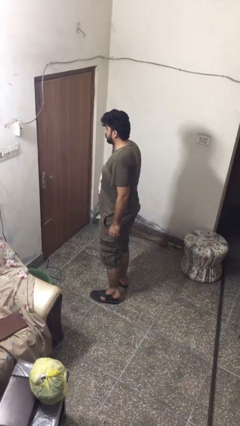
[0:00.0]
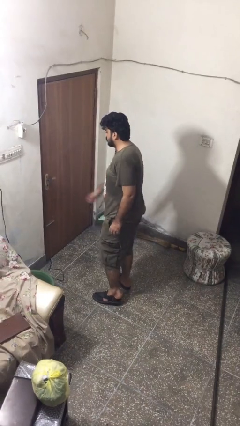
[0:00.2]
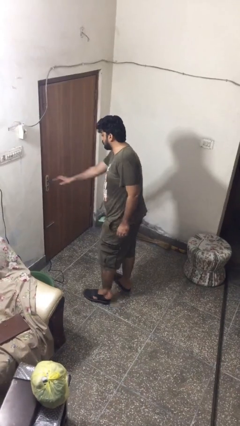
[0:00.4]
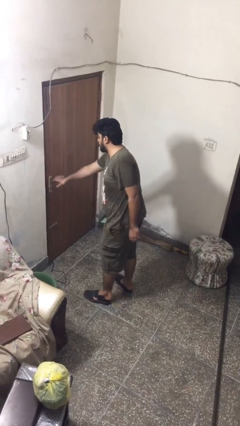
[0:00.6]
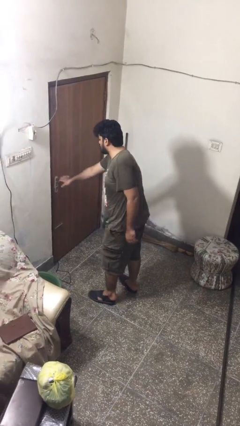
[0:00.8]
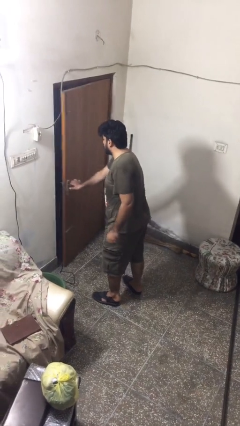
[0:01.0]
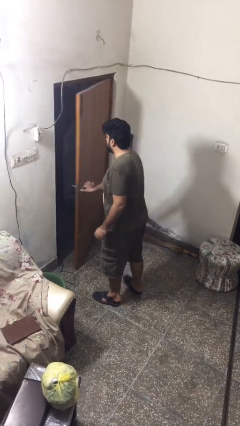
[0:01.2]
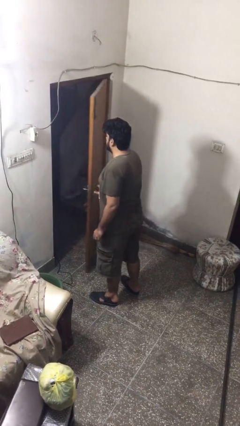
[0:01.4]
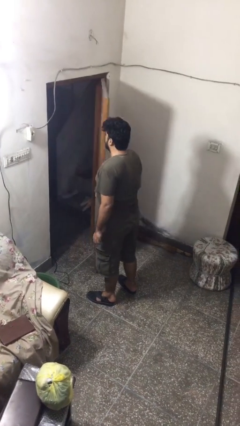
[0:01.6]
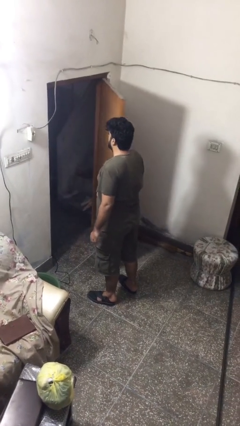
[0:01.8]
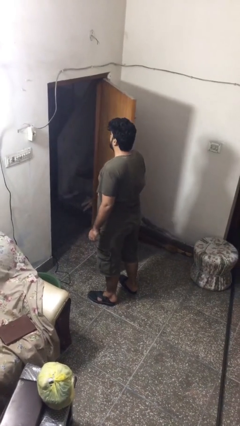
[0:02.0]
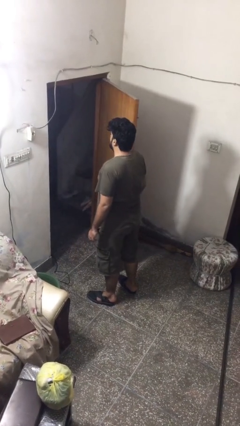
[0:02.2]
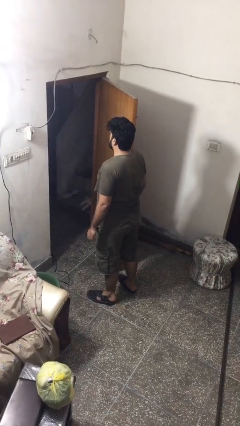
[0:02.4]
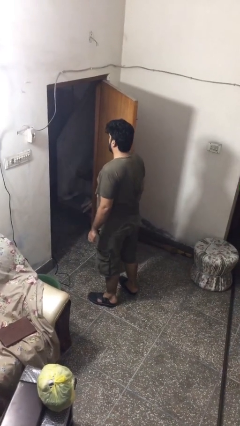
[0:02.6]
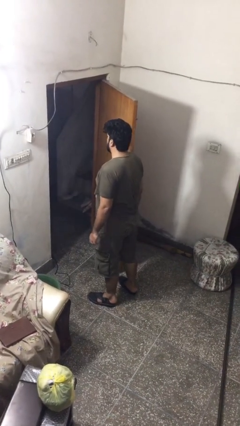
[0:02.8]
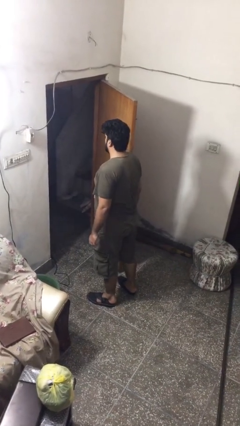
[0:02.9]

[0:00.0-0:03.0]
person opens facility door

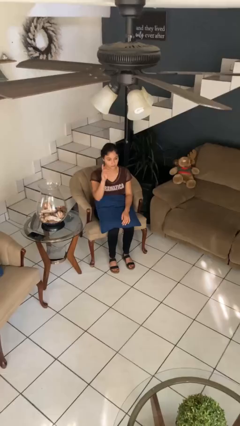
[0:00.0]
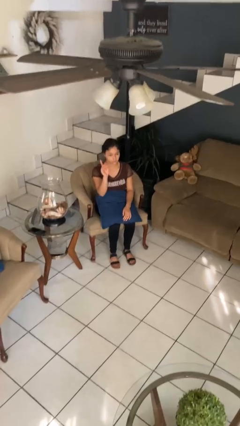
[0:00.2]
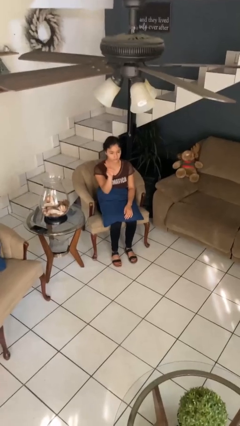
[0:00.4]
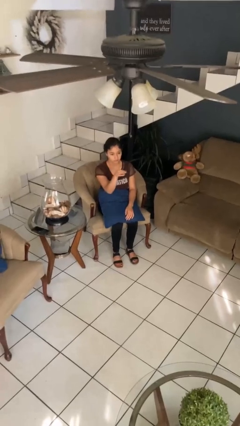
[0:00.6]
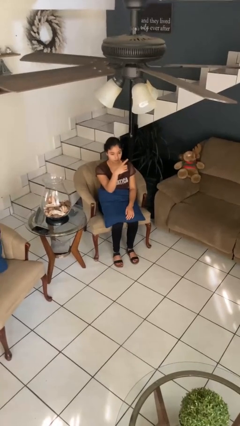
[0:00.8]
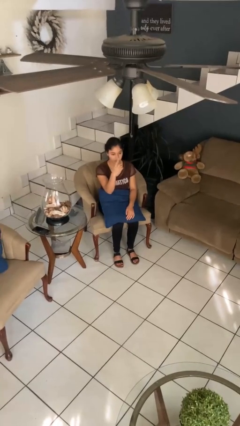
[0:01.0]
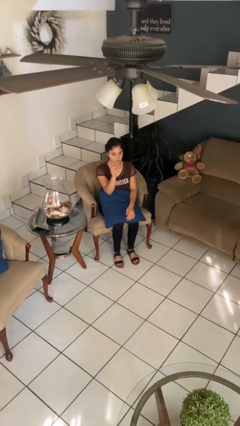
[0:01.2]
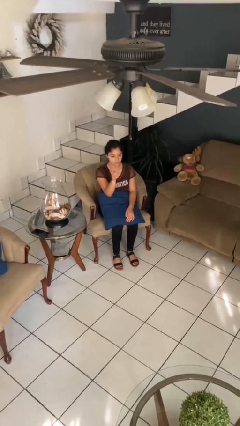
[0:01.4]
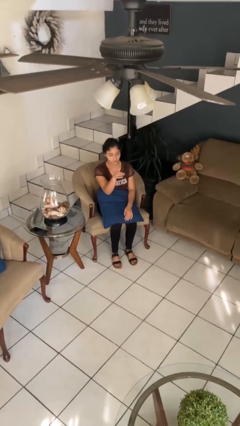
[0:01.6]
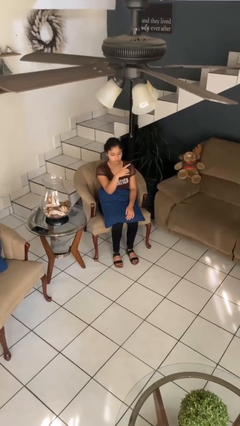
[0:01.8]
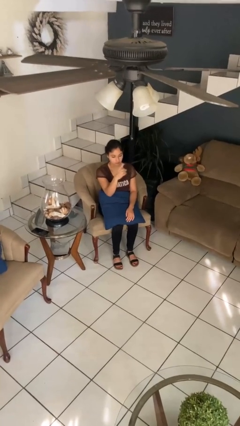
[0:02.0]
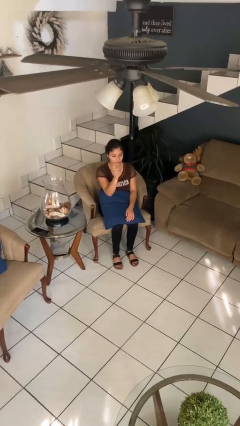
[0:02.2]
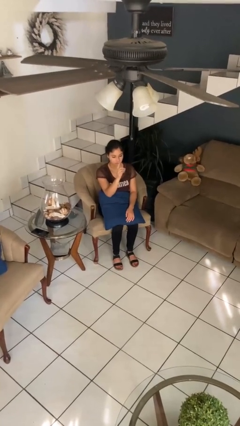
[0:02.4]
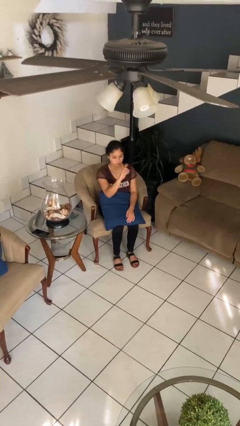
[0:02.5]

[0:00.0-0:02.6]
person gestures swipe left

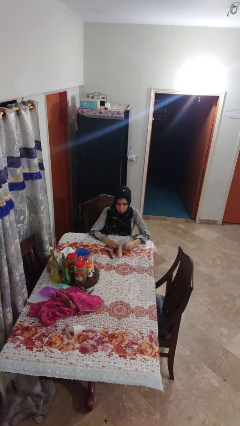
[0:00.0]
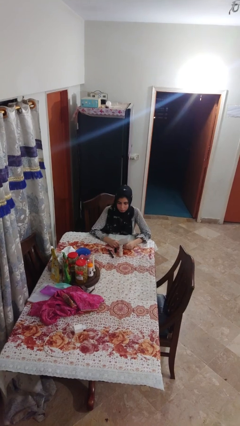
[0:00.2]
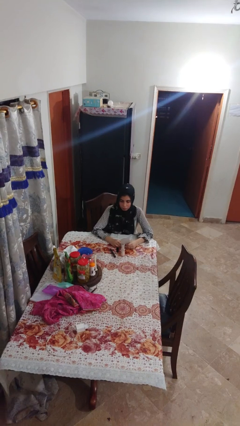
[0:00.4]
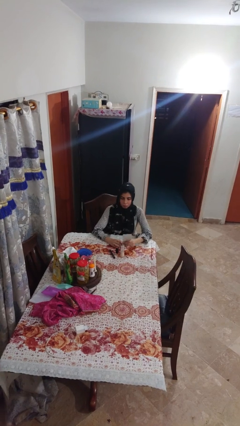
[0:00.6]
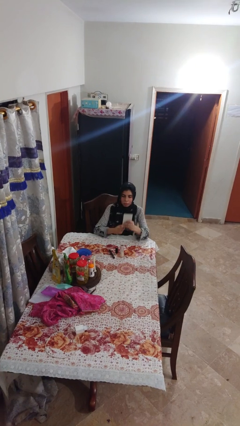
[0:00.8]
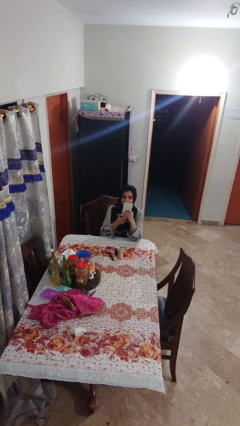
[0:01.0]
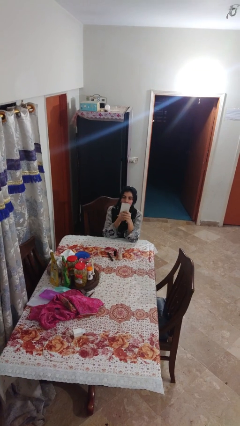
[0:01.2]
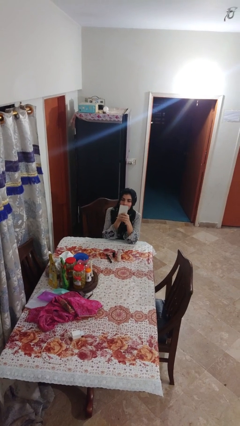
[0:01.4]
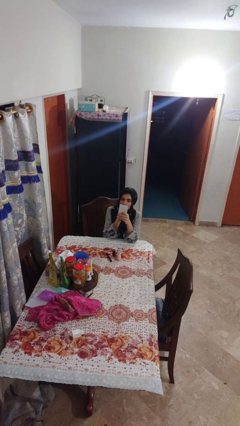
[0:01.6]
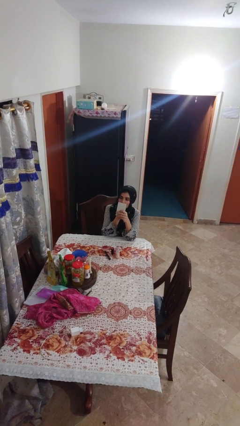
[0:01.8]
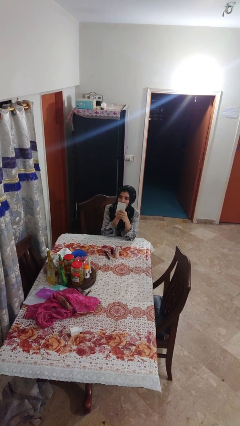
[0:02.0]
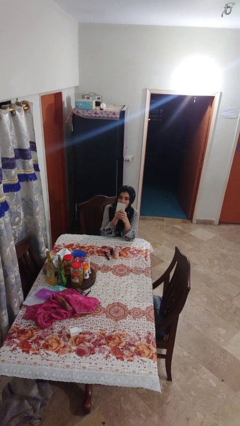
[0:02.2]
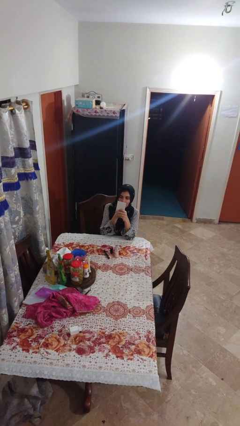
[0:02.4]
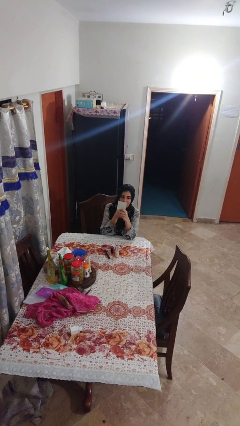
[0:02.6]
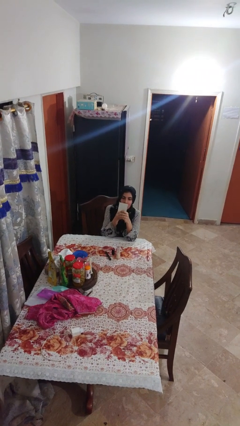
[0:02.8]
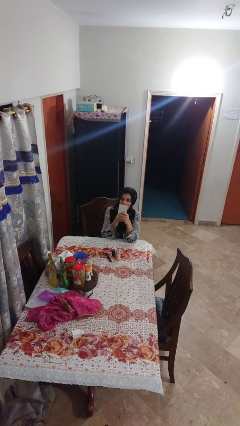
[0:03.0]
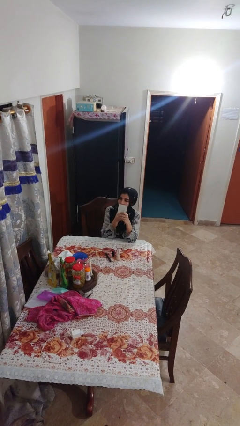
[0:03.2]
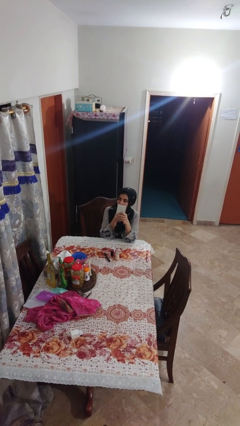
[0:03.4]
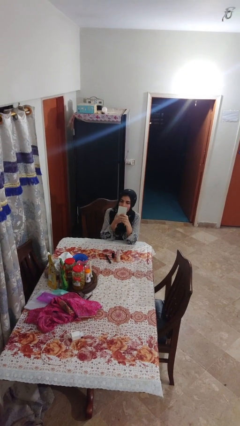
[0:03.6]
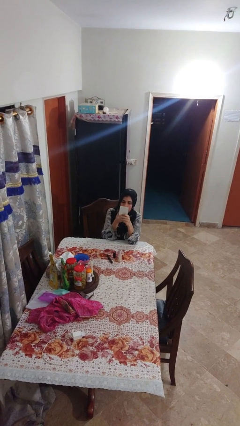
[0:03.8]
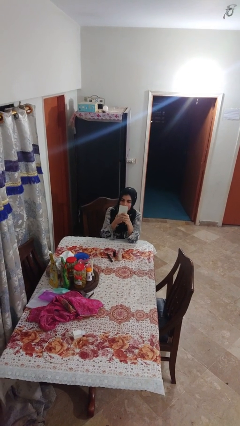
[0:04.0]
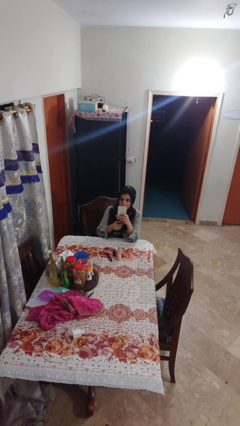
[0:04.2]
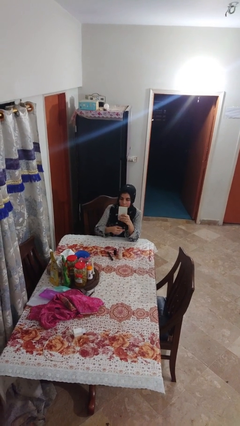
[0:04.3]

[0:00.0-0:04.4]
person applies lip makeup

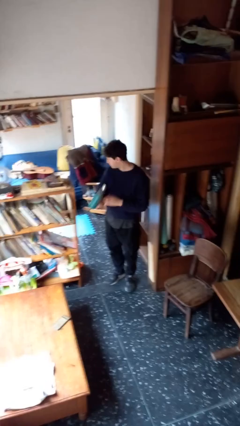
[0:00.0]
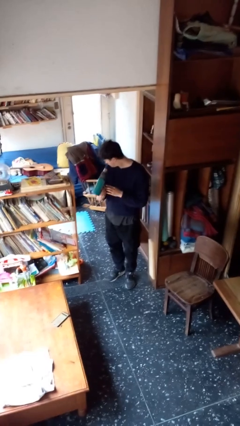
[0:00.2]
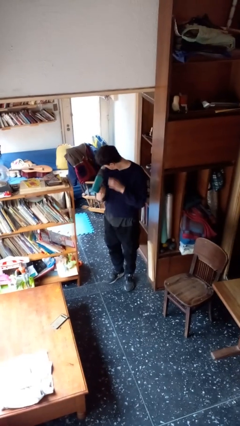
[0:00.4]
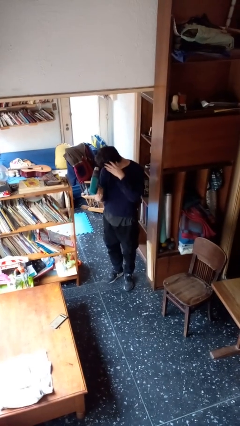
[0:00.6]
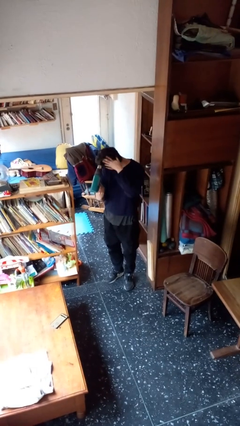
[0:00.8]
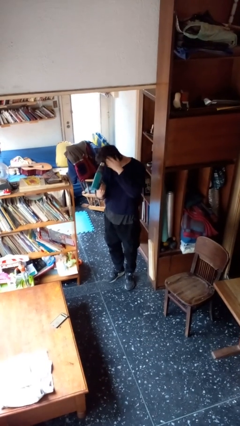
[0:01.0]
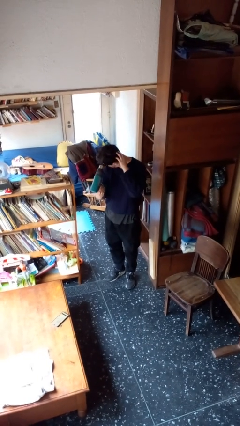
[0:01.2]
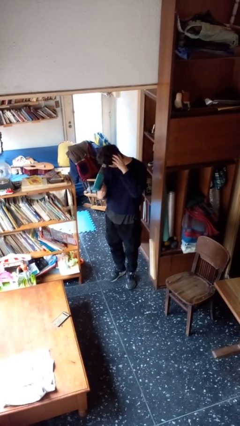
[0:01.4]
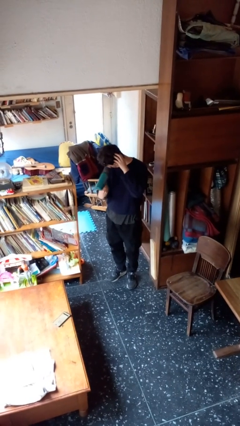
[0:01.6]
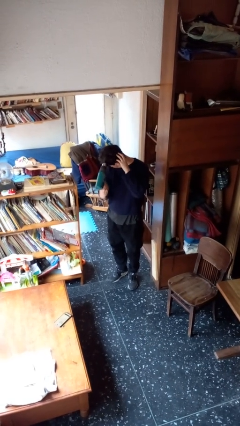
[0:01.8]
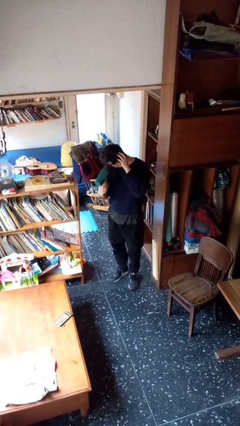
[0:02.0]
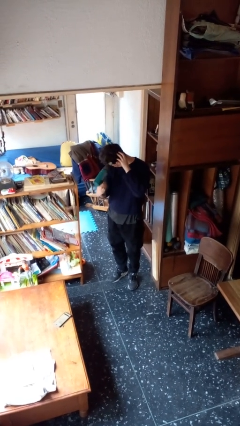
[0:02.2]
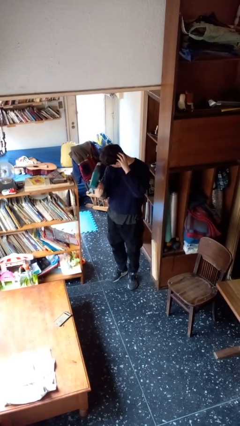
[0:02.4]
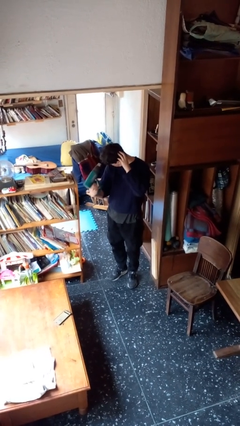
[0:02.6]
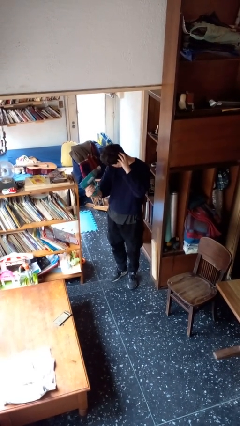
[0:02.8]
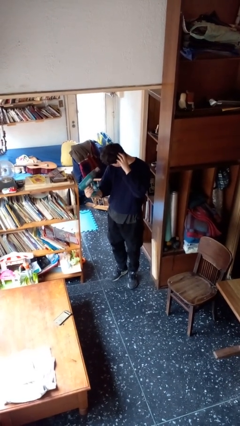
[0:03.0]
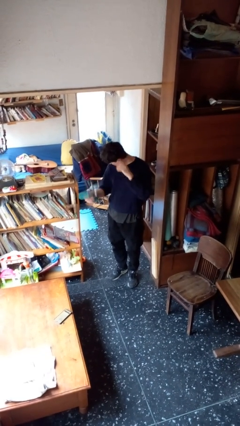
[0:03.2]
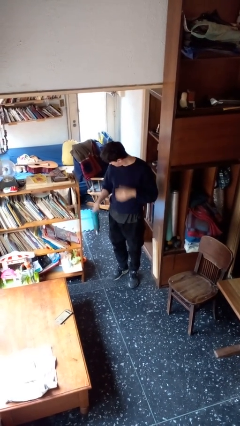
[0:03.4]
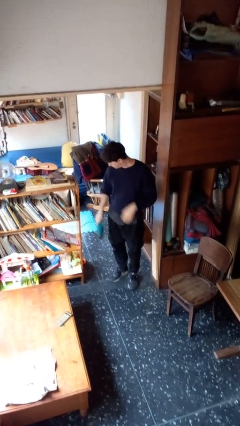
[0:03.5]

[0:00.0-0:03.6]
person dries hair with hairdryer

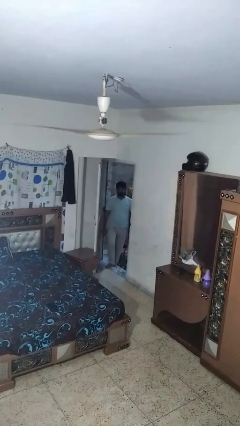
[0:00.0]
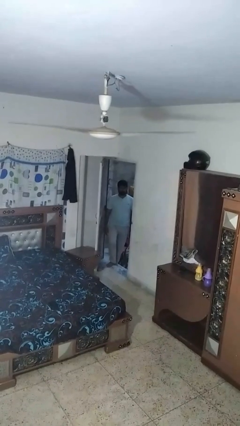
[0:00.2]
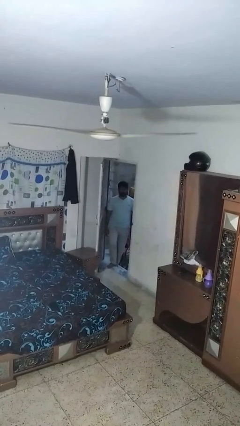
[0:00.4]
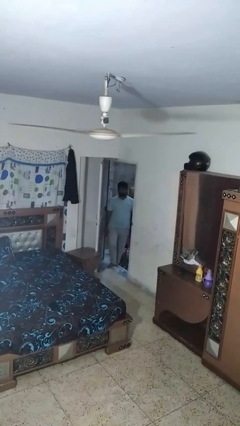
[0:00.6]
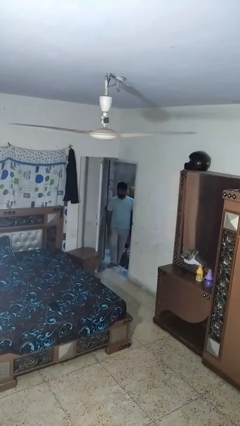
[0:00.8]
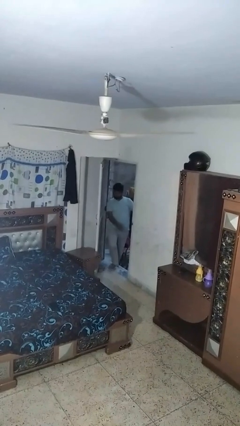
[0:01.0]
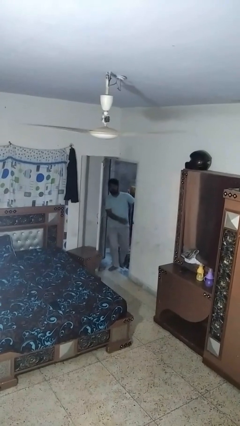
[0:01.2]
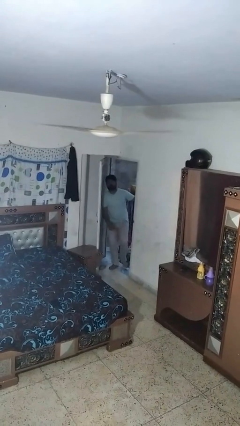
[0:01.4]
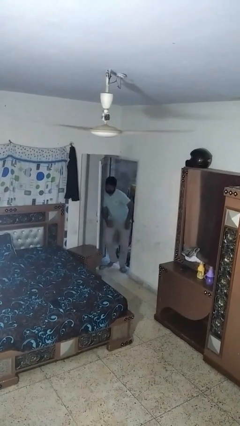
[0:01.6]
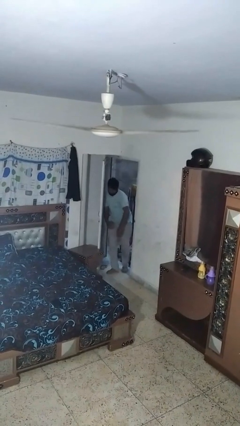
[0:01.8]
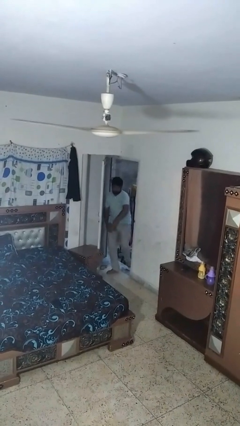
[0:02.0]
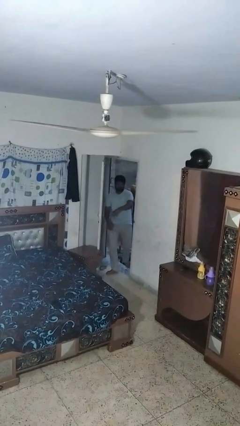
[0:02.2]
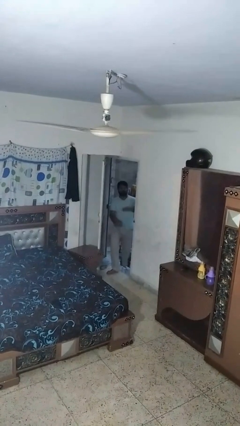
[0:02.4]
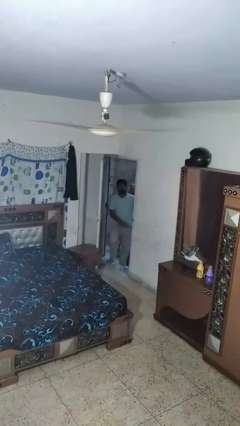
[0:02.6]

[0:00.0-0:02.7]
person bumps into wall

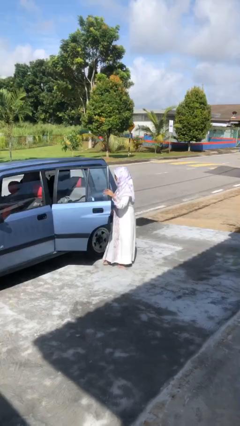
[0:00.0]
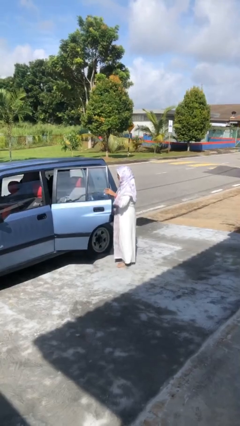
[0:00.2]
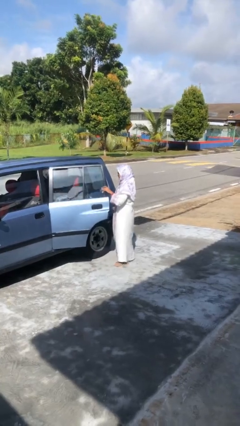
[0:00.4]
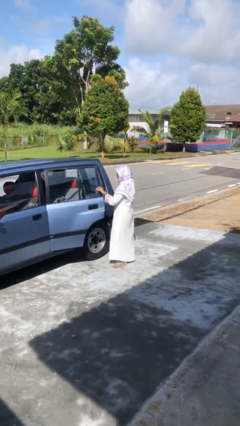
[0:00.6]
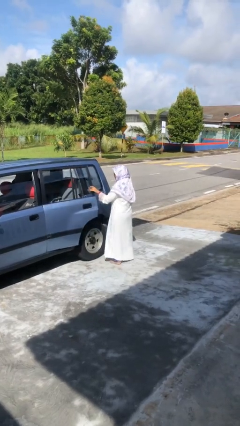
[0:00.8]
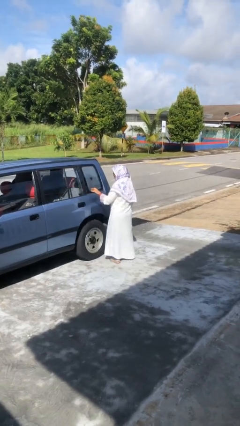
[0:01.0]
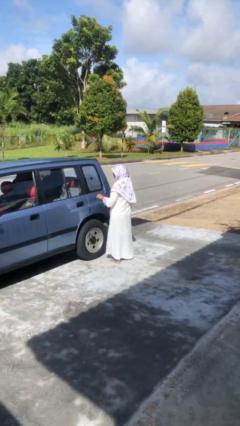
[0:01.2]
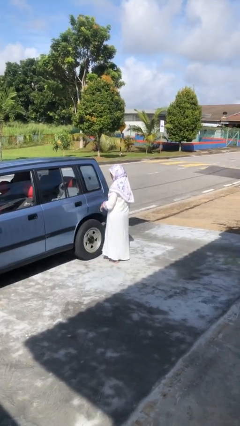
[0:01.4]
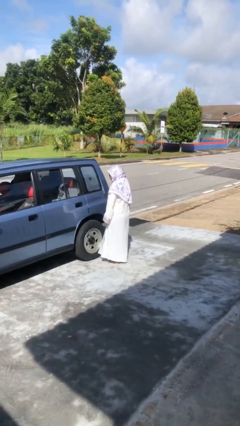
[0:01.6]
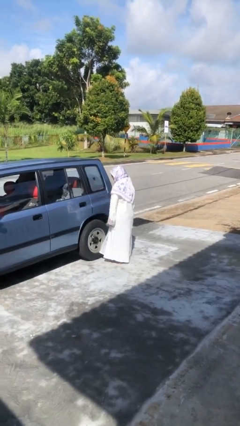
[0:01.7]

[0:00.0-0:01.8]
person closes car door
